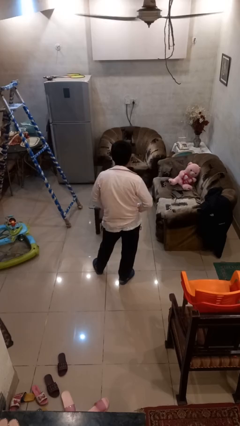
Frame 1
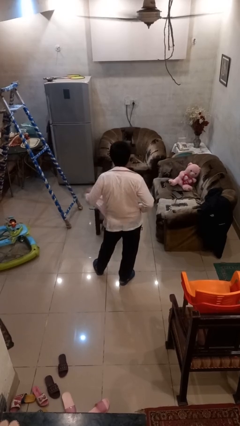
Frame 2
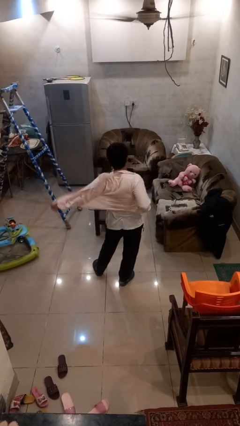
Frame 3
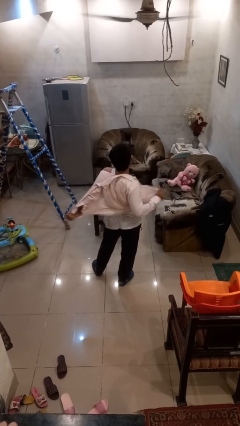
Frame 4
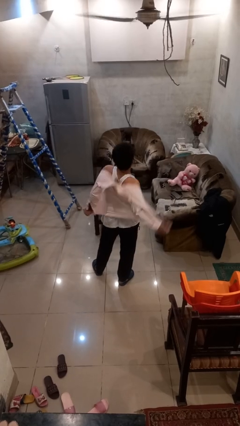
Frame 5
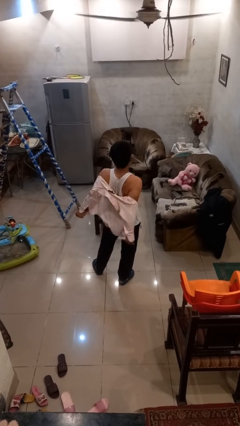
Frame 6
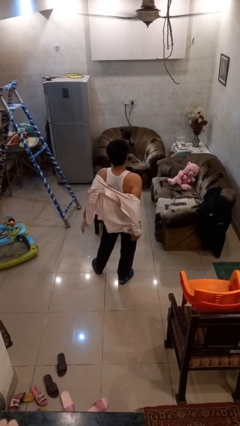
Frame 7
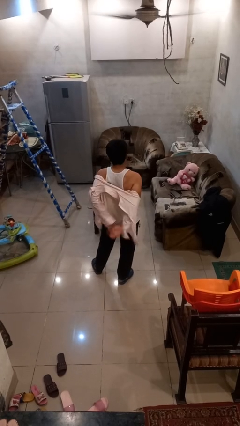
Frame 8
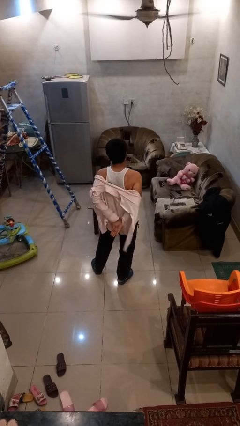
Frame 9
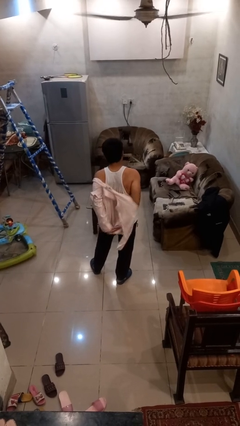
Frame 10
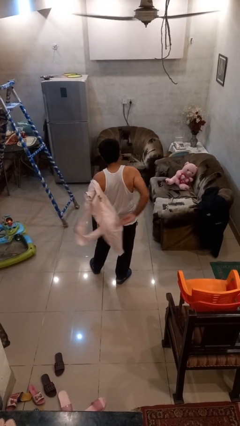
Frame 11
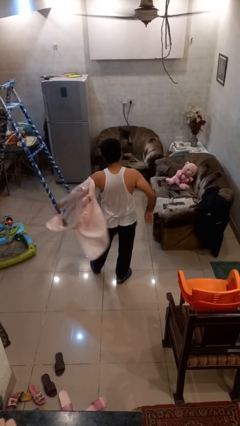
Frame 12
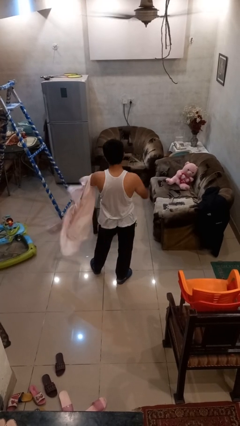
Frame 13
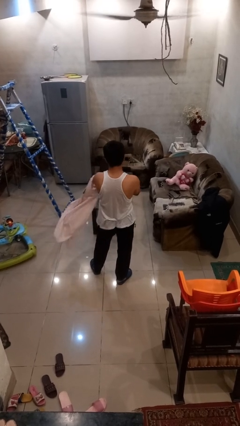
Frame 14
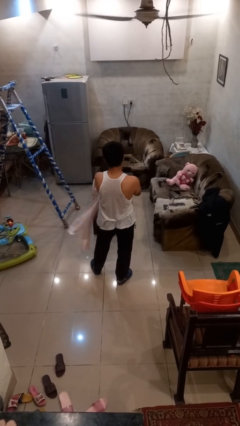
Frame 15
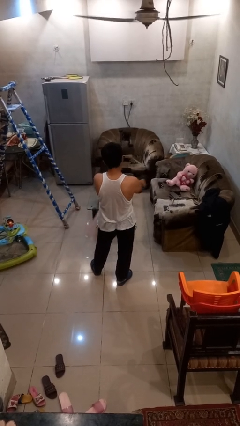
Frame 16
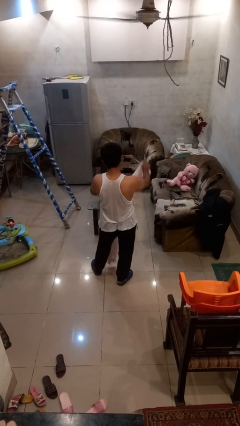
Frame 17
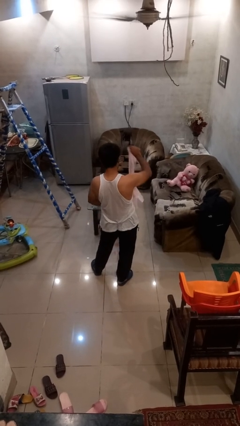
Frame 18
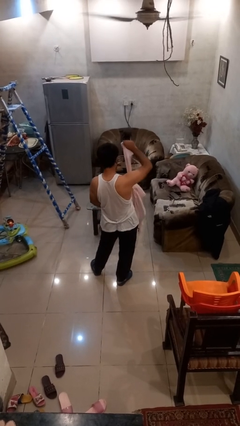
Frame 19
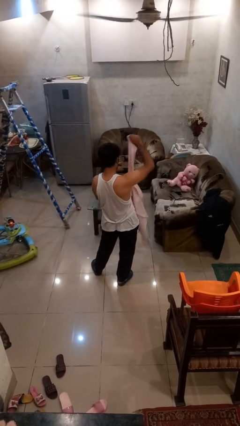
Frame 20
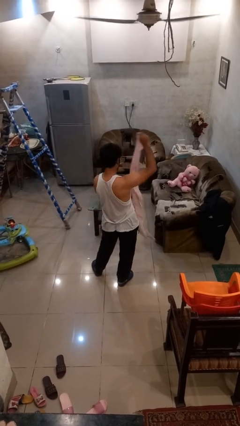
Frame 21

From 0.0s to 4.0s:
person takes off shirt

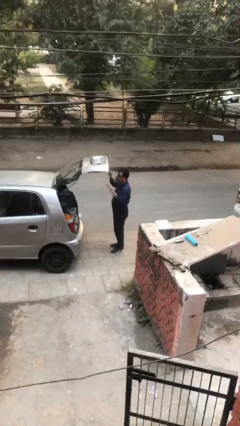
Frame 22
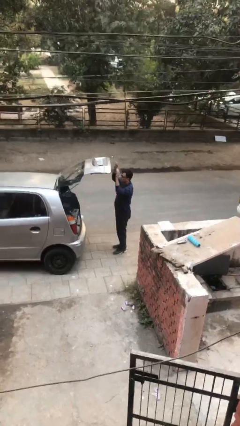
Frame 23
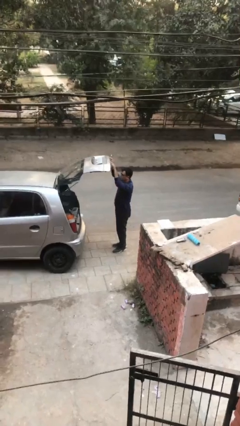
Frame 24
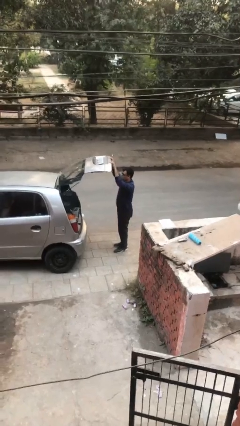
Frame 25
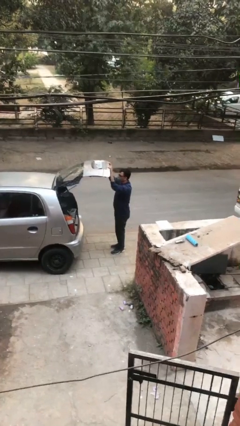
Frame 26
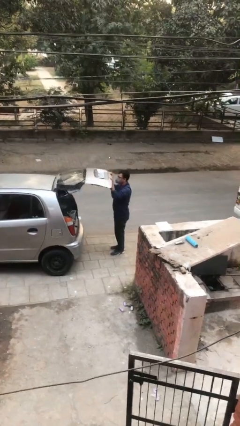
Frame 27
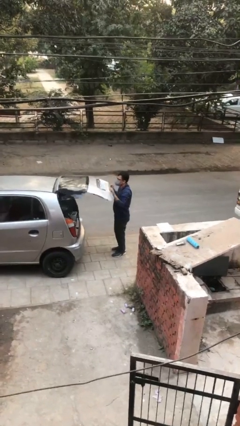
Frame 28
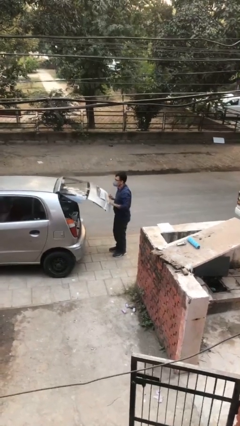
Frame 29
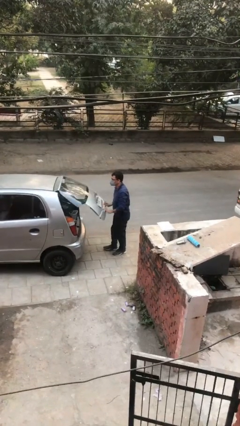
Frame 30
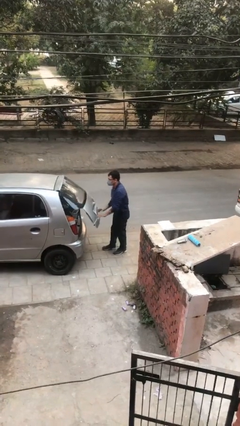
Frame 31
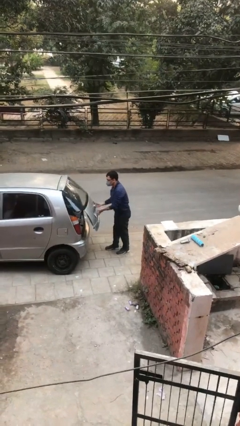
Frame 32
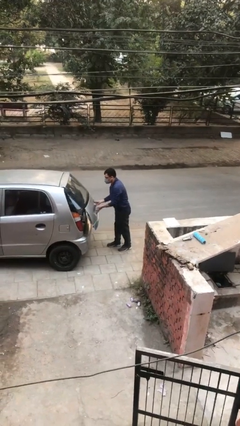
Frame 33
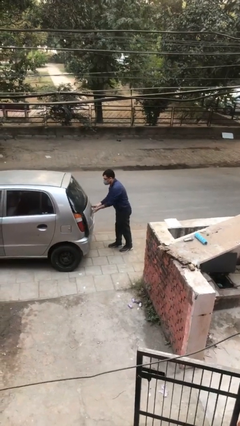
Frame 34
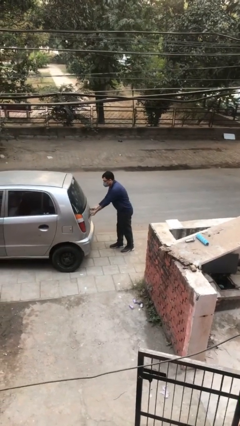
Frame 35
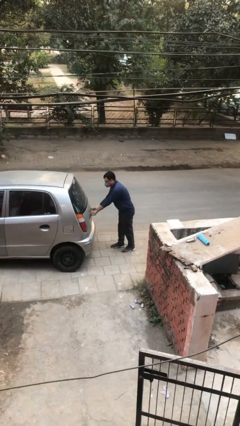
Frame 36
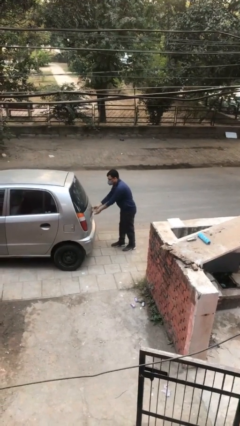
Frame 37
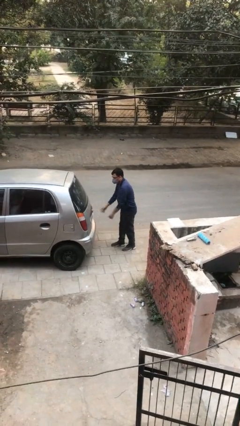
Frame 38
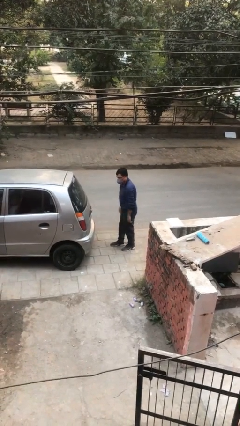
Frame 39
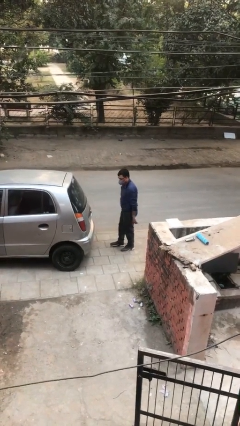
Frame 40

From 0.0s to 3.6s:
person closes car trunk

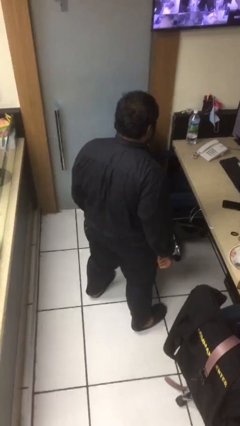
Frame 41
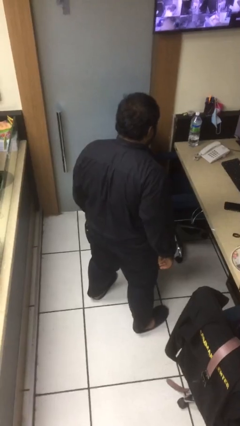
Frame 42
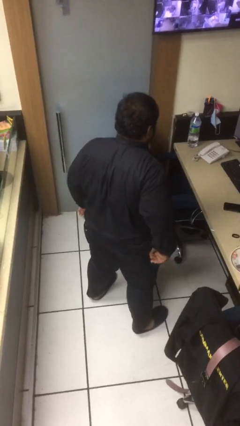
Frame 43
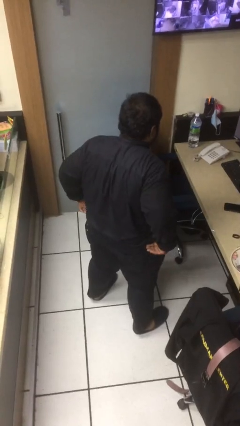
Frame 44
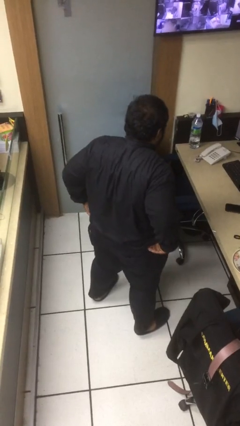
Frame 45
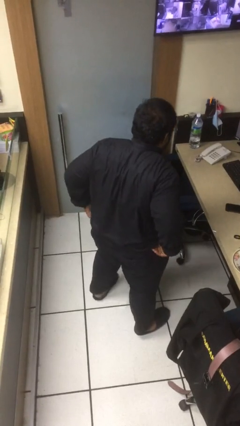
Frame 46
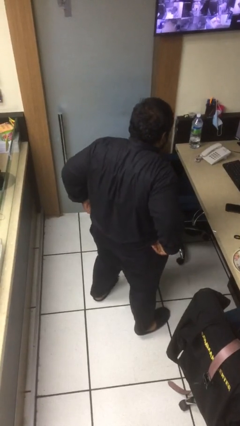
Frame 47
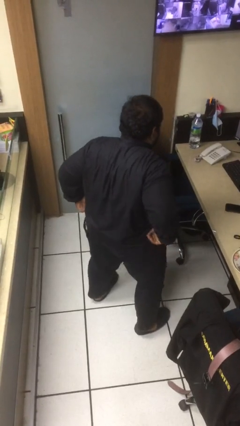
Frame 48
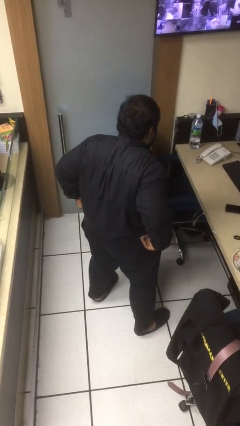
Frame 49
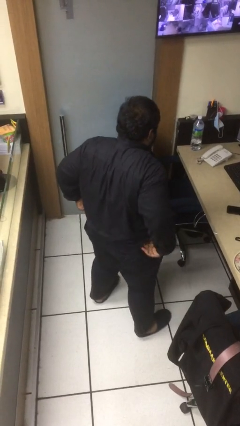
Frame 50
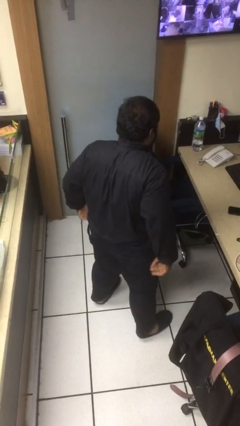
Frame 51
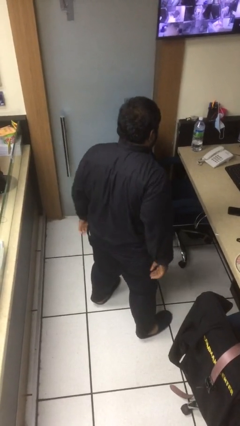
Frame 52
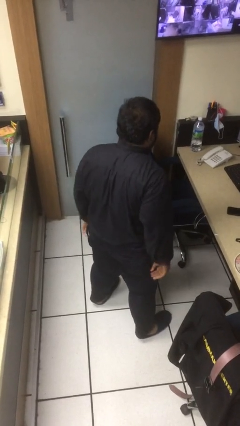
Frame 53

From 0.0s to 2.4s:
person hikes up pants

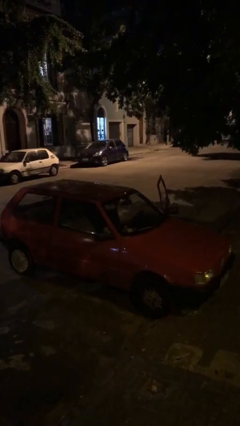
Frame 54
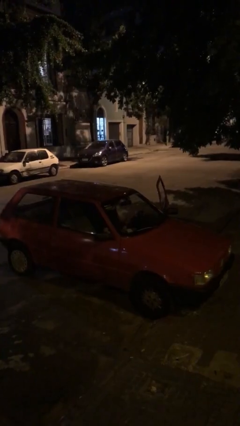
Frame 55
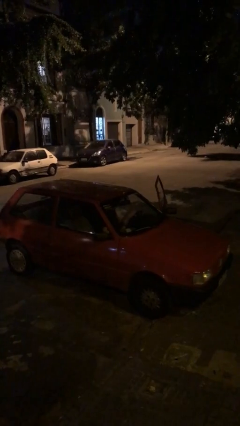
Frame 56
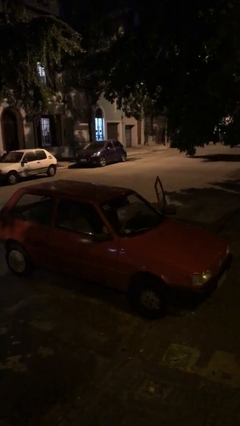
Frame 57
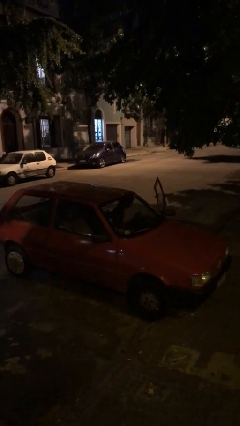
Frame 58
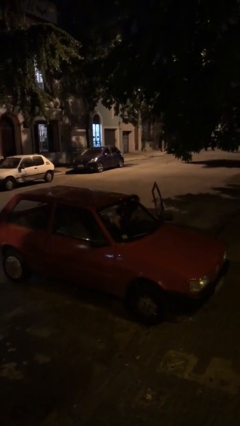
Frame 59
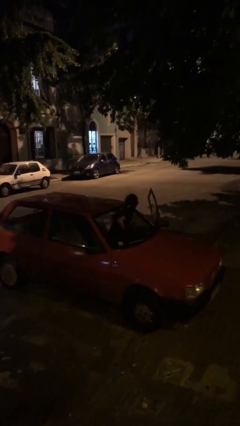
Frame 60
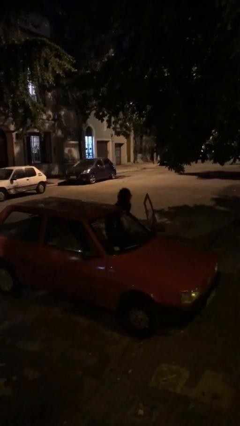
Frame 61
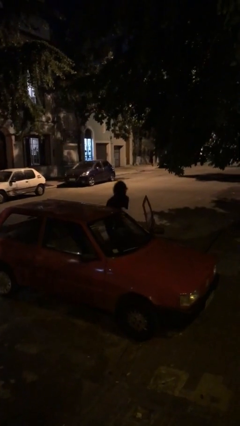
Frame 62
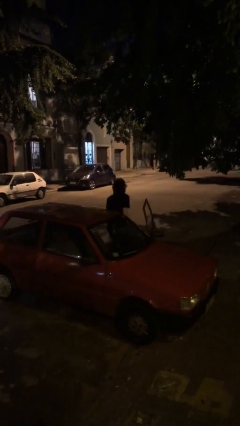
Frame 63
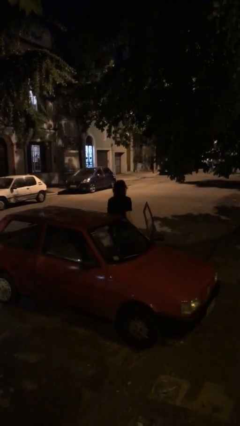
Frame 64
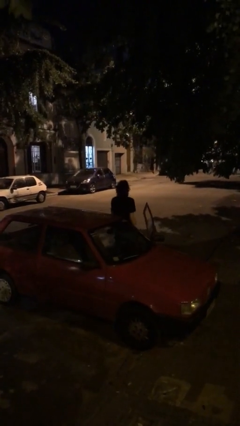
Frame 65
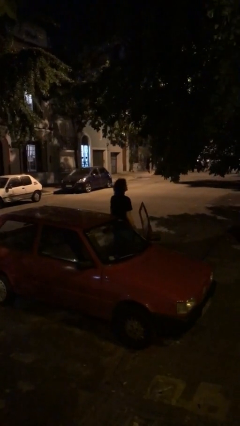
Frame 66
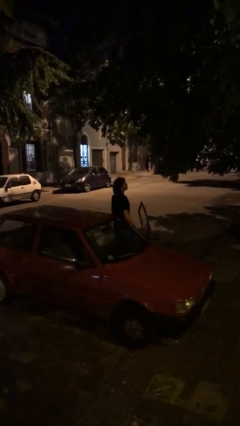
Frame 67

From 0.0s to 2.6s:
person exits car

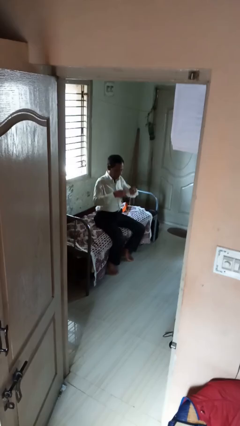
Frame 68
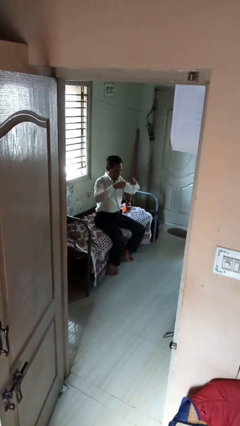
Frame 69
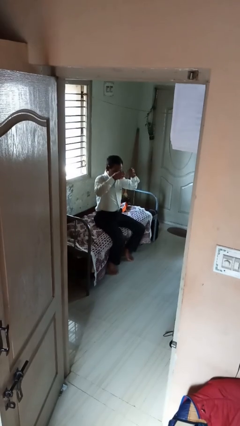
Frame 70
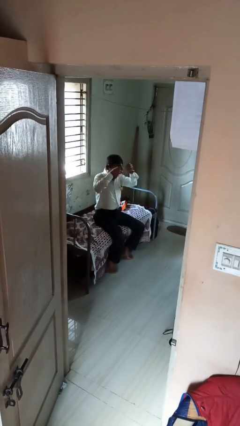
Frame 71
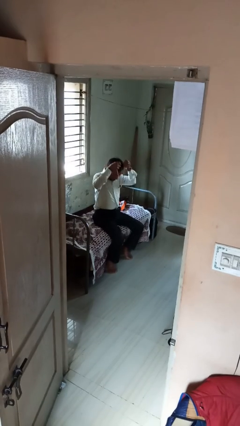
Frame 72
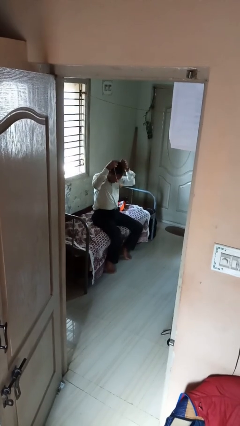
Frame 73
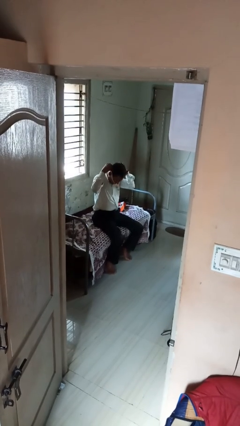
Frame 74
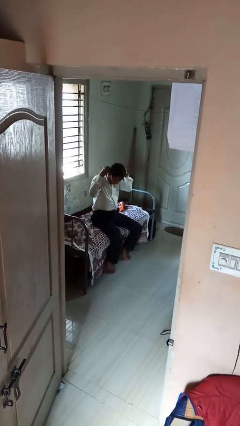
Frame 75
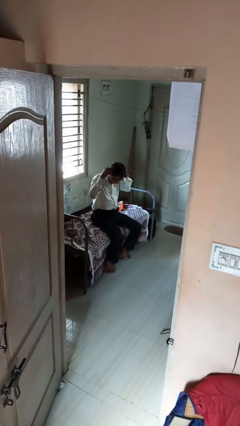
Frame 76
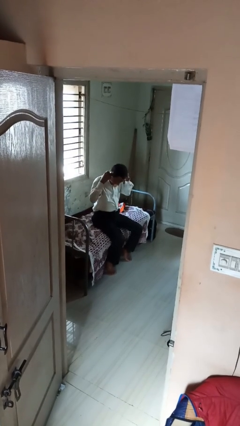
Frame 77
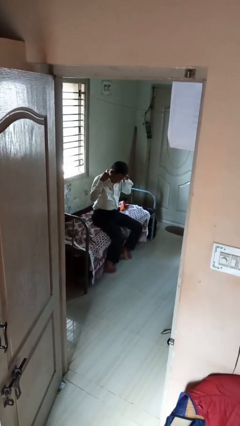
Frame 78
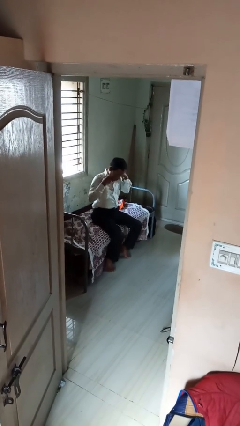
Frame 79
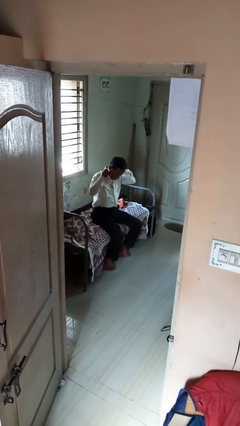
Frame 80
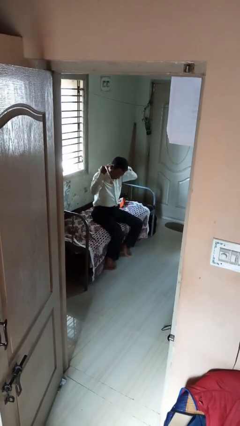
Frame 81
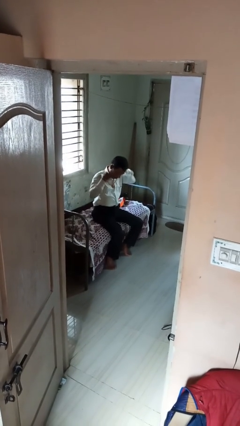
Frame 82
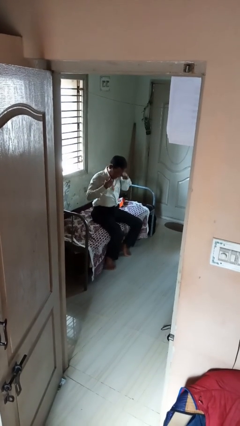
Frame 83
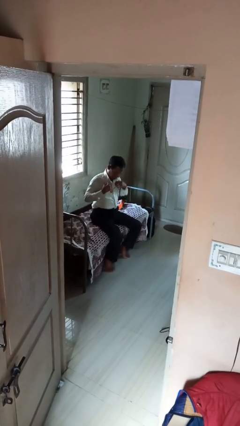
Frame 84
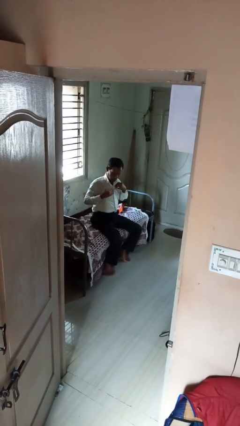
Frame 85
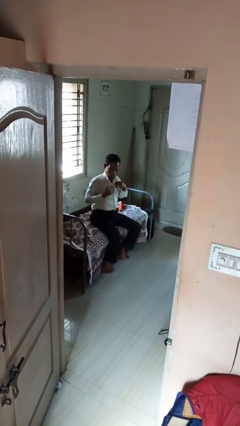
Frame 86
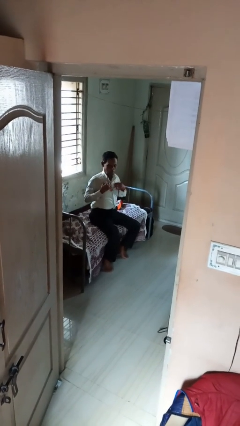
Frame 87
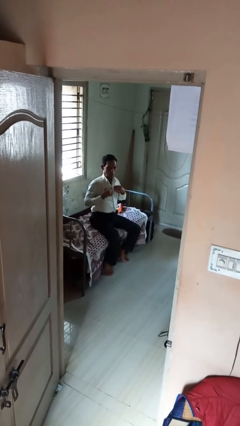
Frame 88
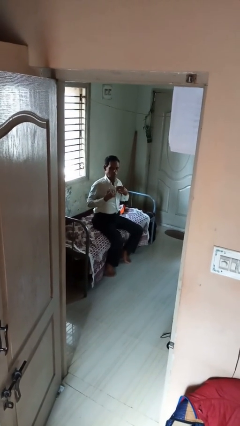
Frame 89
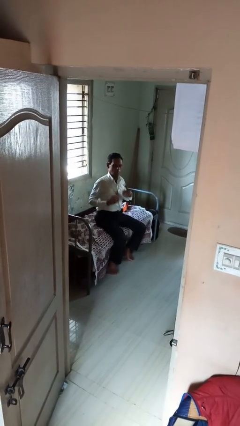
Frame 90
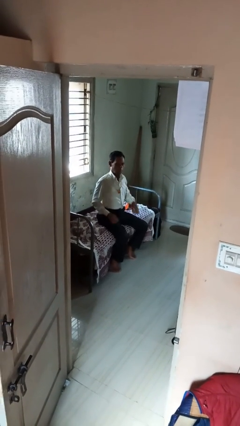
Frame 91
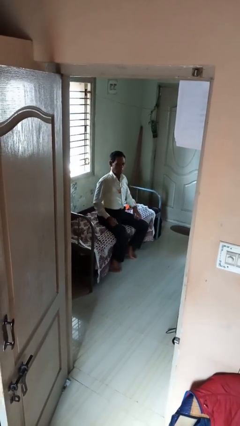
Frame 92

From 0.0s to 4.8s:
person puts on necklace

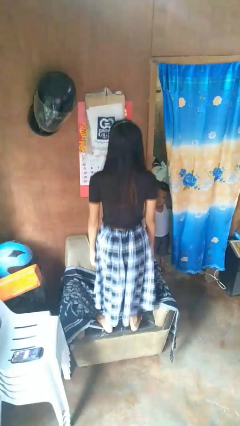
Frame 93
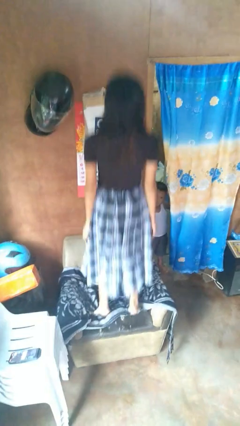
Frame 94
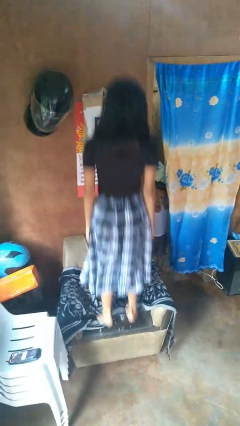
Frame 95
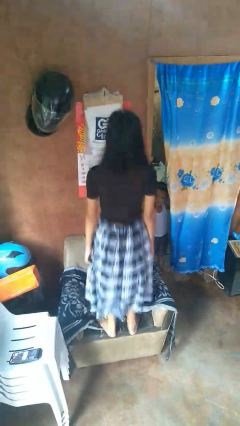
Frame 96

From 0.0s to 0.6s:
person jumps on couch
